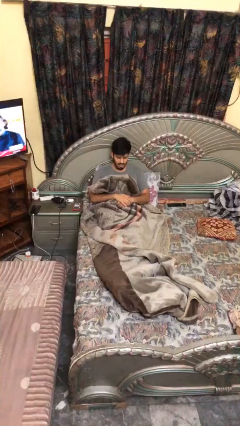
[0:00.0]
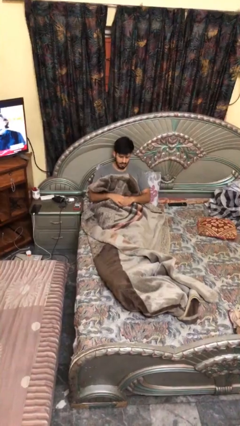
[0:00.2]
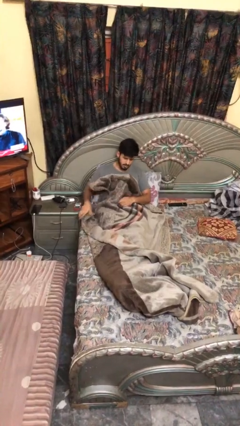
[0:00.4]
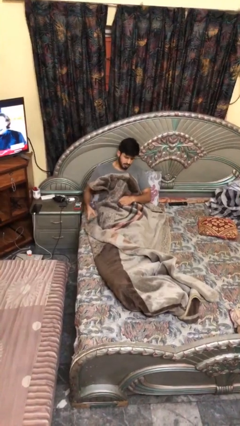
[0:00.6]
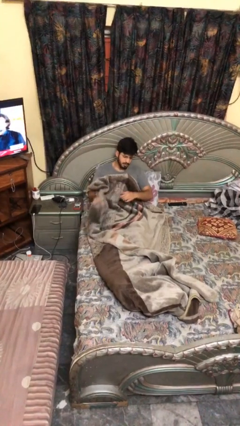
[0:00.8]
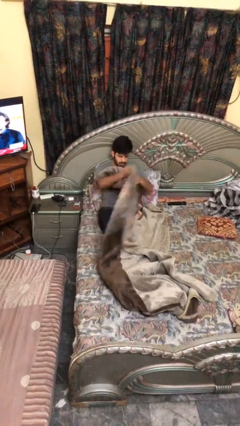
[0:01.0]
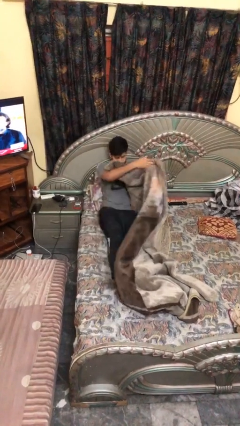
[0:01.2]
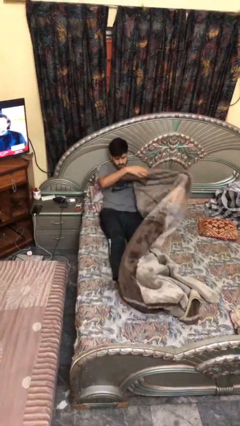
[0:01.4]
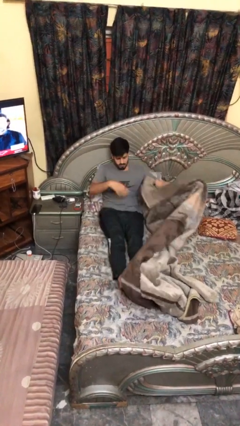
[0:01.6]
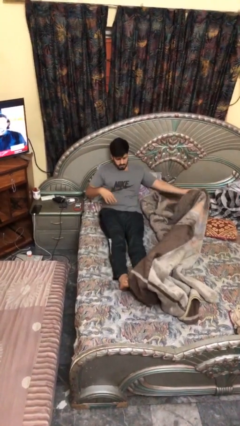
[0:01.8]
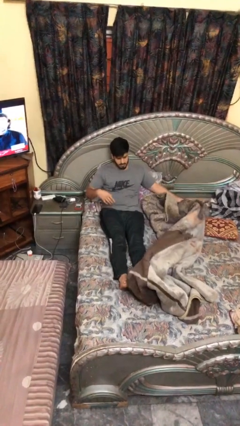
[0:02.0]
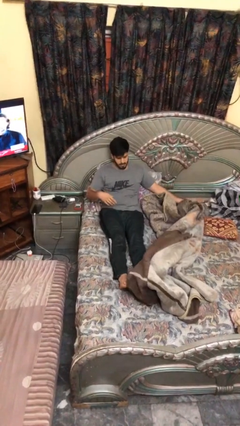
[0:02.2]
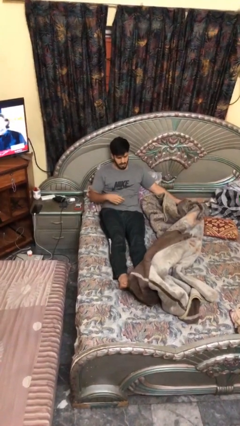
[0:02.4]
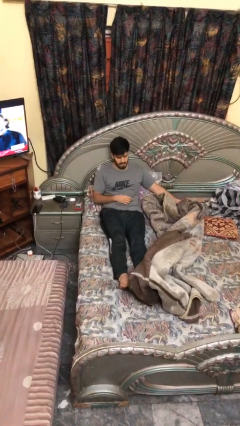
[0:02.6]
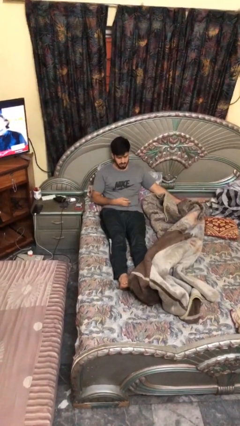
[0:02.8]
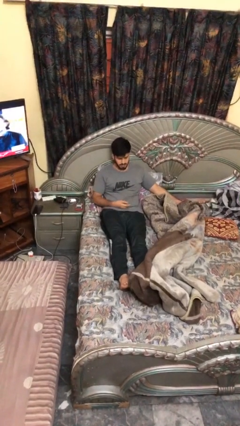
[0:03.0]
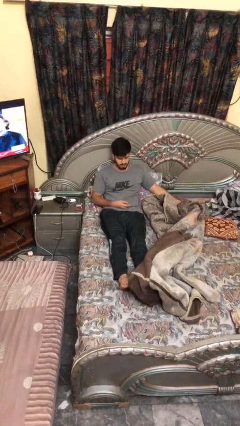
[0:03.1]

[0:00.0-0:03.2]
person uncovers with blanket

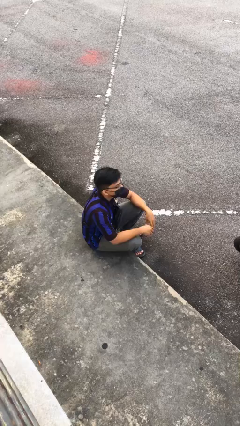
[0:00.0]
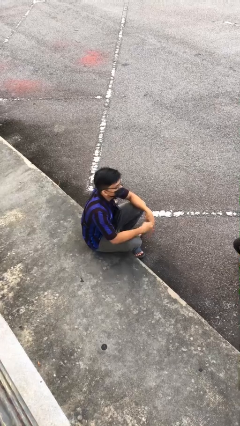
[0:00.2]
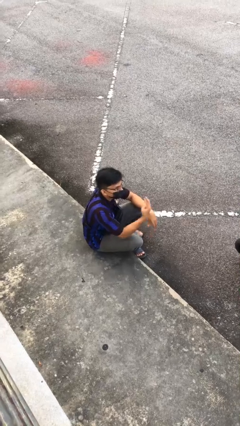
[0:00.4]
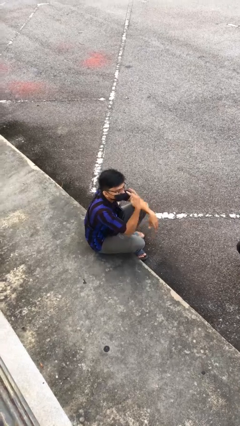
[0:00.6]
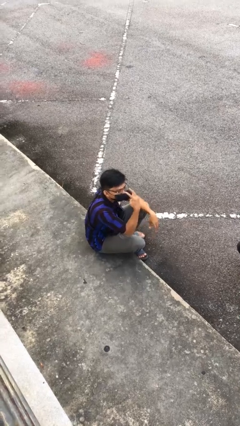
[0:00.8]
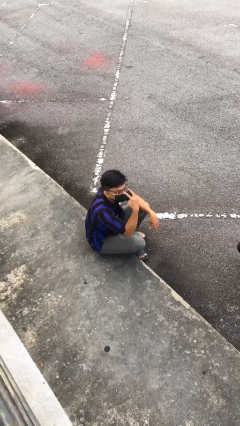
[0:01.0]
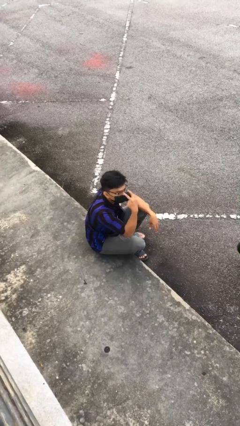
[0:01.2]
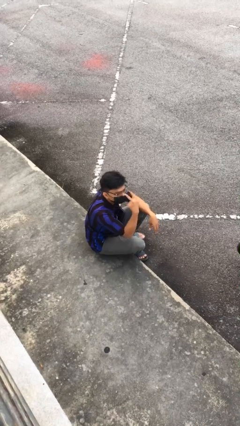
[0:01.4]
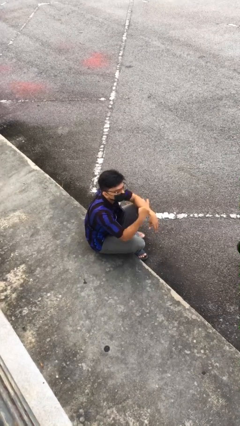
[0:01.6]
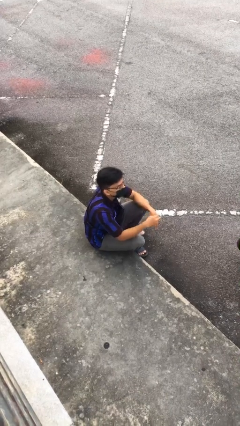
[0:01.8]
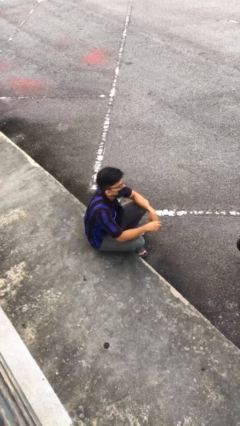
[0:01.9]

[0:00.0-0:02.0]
person gestures watch closely

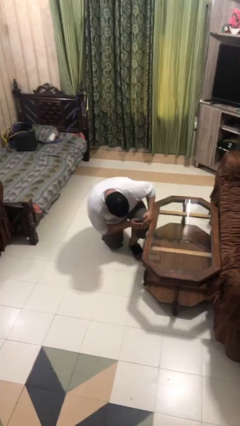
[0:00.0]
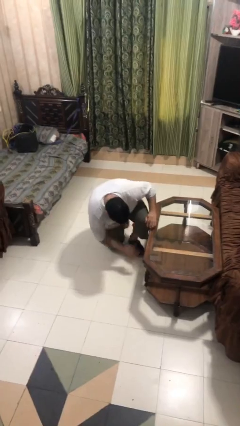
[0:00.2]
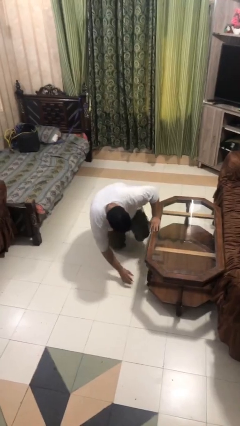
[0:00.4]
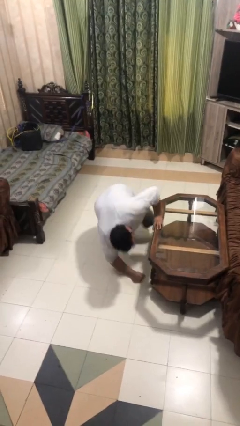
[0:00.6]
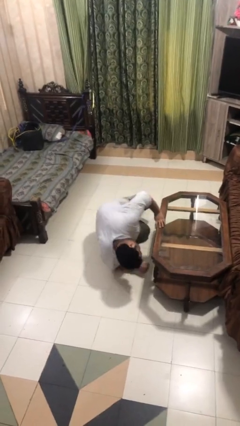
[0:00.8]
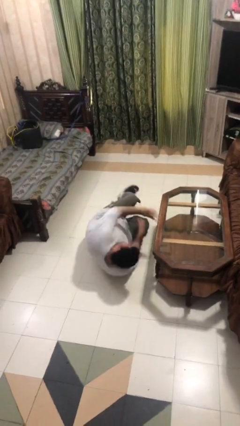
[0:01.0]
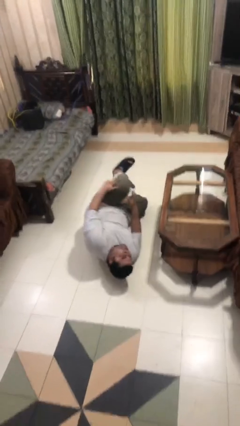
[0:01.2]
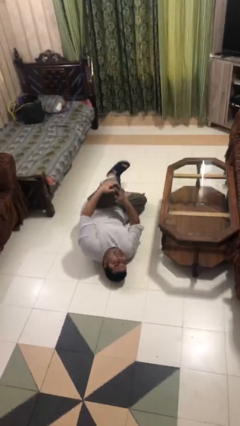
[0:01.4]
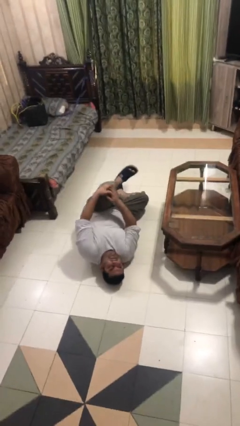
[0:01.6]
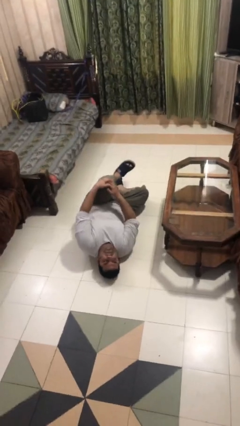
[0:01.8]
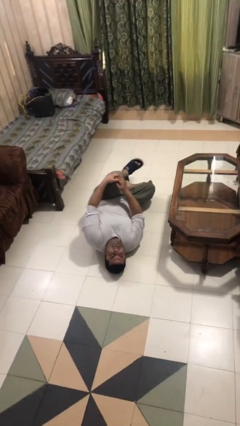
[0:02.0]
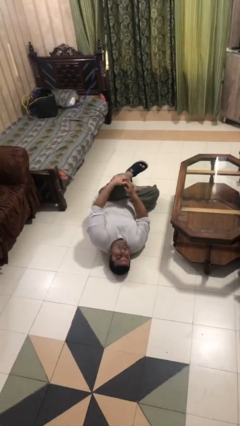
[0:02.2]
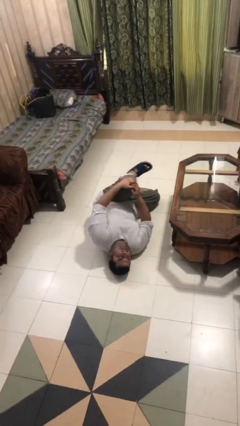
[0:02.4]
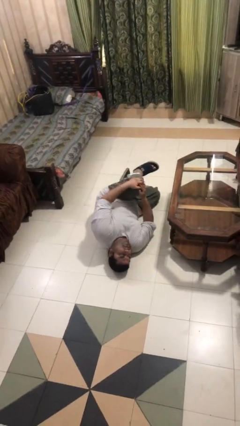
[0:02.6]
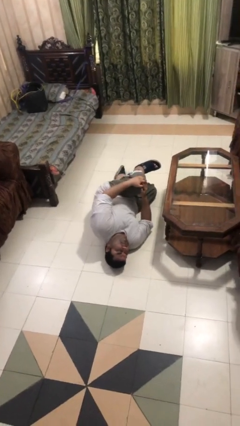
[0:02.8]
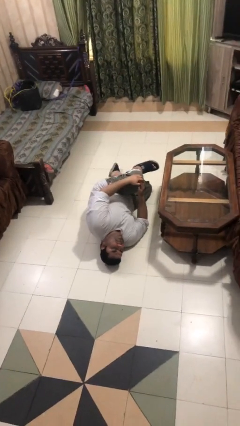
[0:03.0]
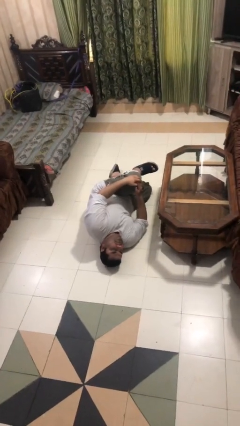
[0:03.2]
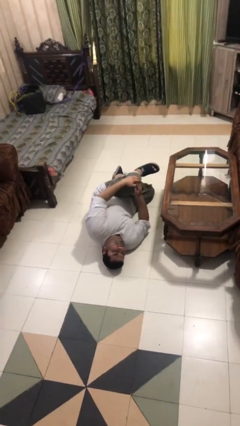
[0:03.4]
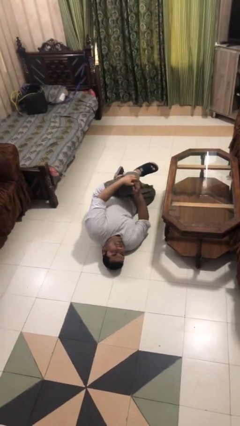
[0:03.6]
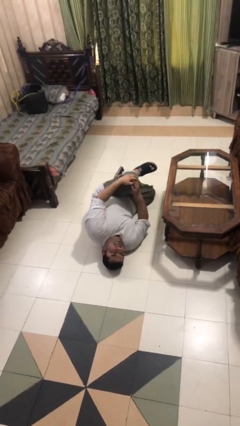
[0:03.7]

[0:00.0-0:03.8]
person lies down on floor

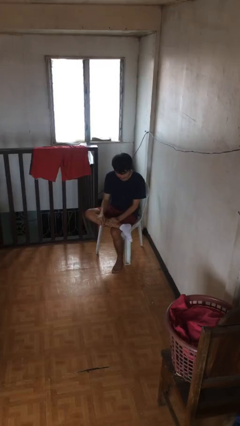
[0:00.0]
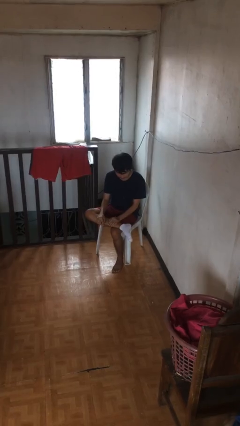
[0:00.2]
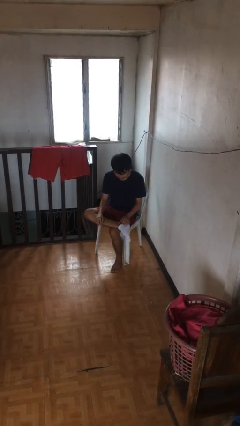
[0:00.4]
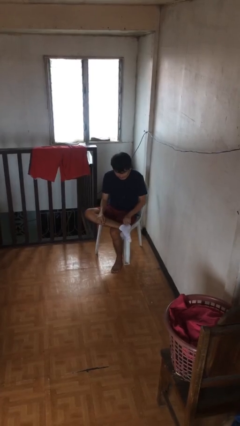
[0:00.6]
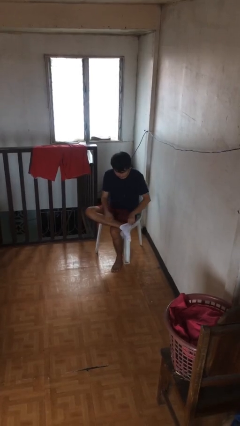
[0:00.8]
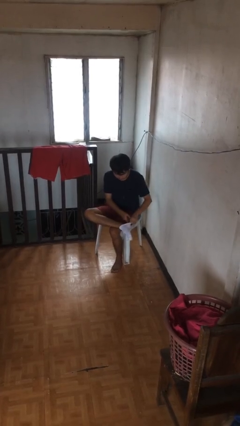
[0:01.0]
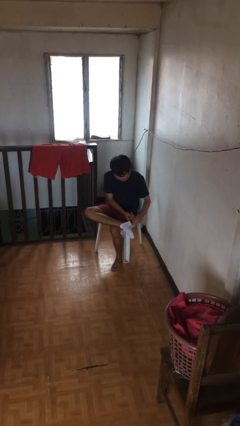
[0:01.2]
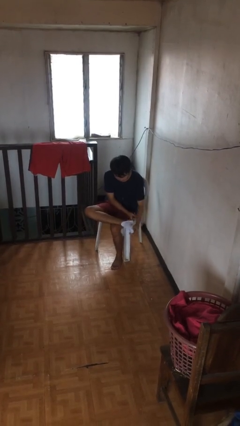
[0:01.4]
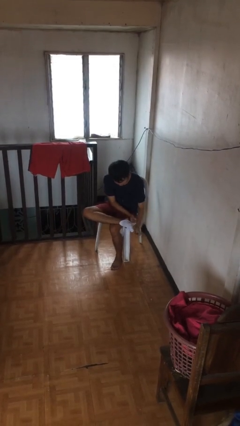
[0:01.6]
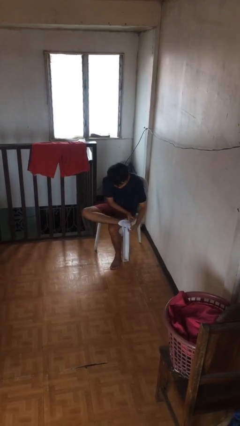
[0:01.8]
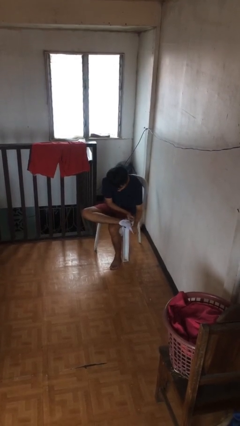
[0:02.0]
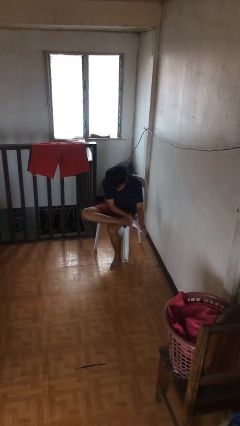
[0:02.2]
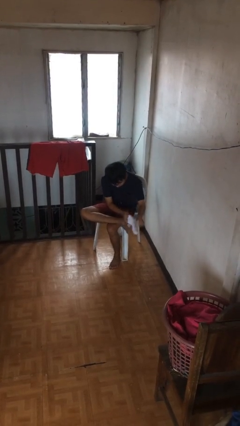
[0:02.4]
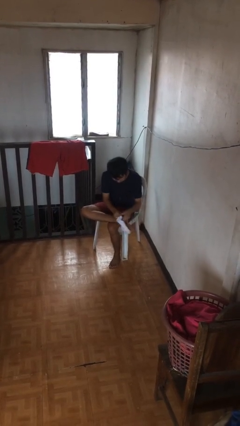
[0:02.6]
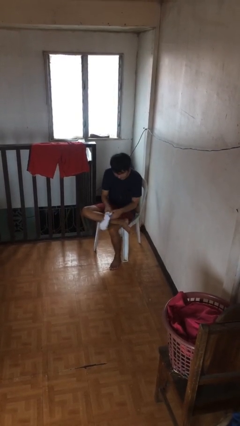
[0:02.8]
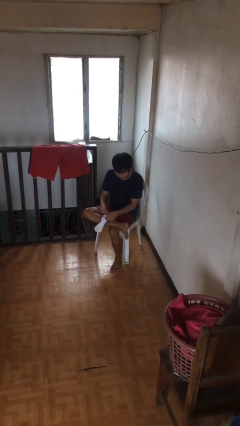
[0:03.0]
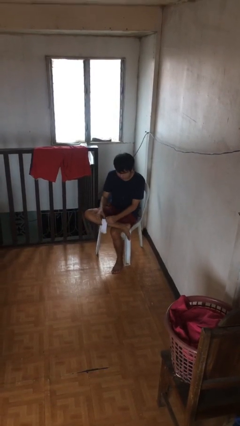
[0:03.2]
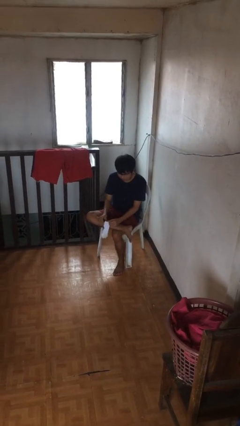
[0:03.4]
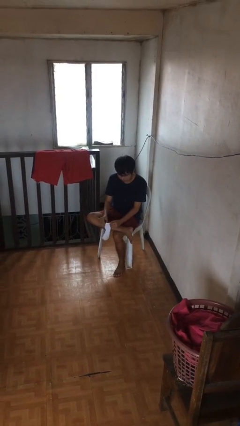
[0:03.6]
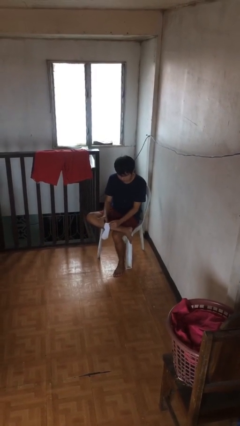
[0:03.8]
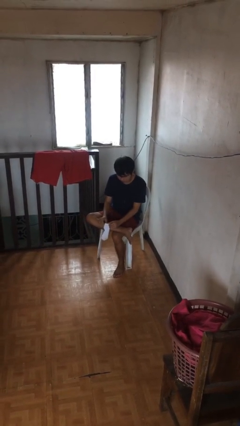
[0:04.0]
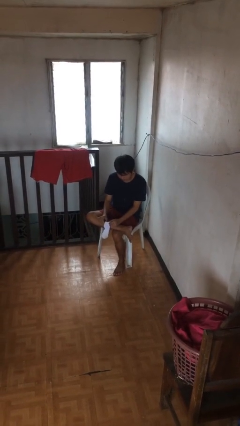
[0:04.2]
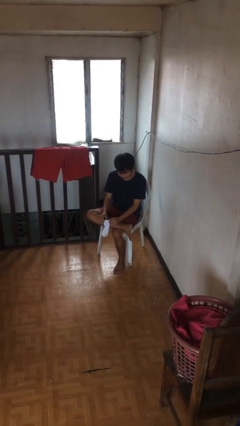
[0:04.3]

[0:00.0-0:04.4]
person takes off socks

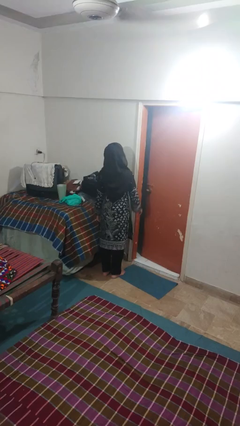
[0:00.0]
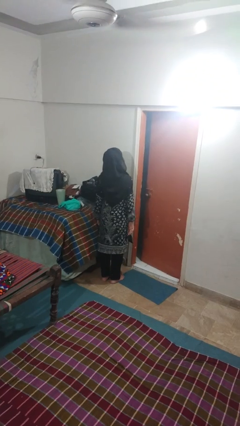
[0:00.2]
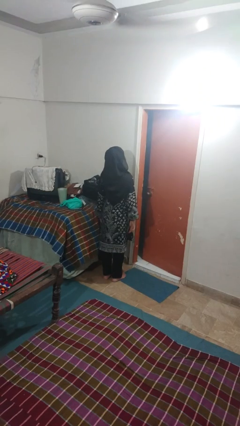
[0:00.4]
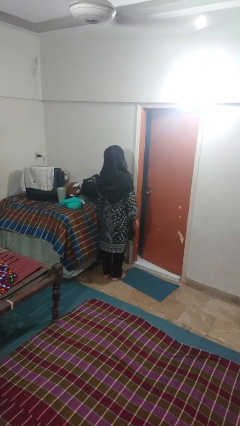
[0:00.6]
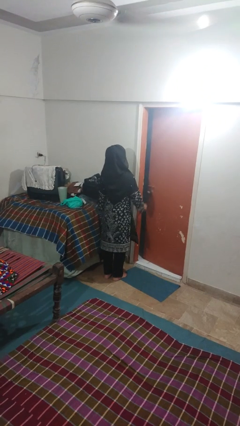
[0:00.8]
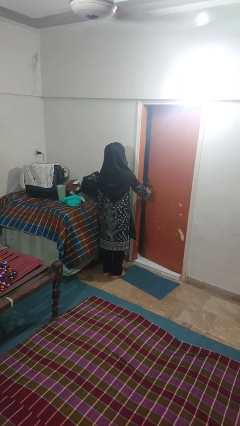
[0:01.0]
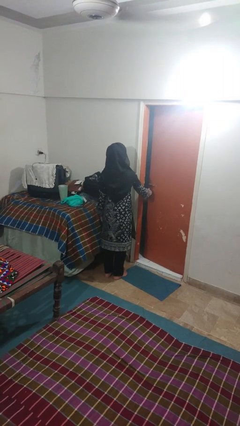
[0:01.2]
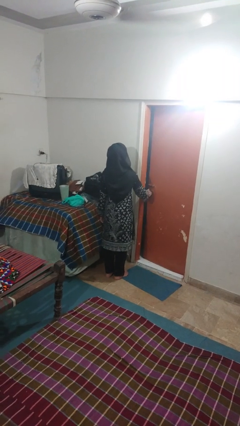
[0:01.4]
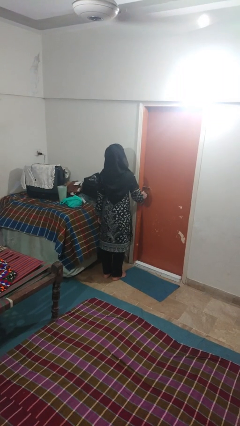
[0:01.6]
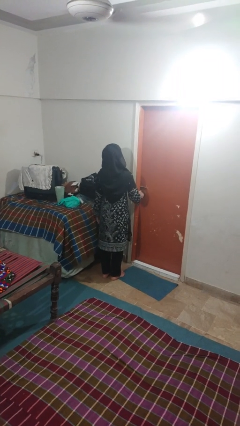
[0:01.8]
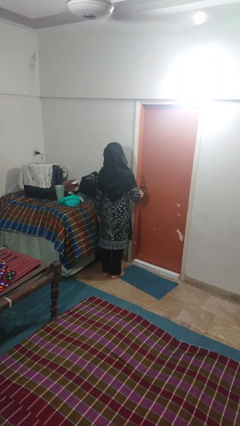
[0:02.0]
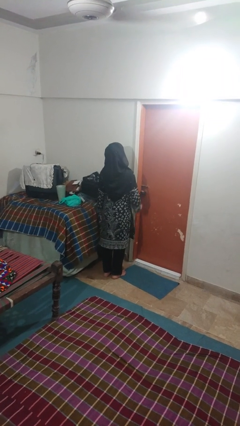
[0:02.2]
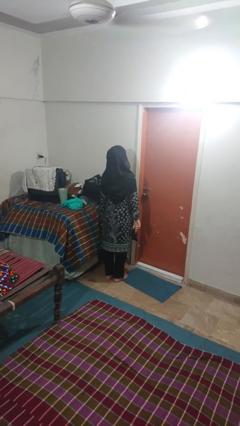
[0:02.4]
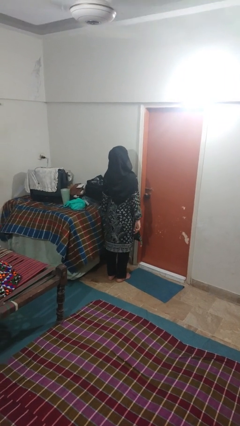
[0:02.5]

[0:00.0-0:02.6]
person closes facility door

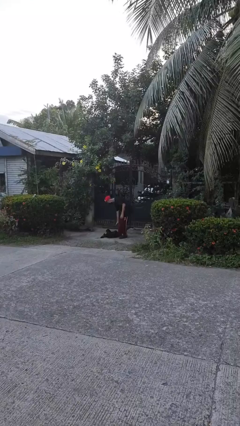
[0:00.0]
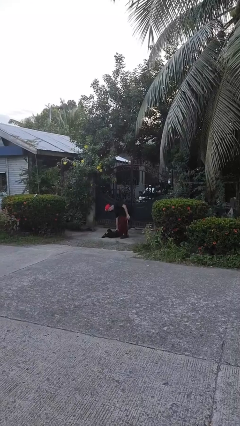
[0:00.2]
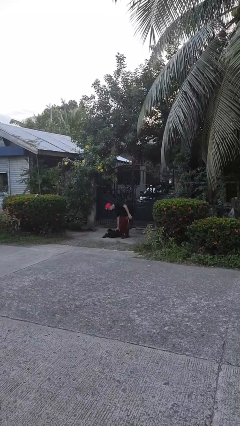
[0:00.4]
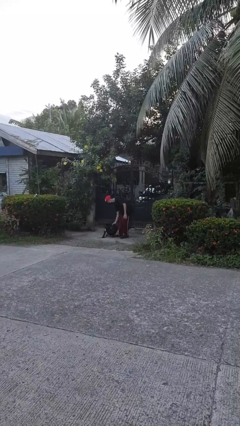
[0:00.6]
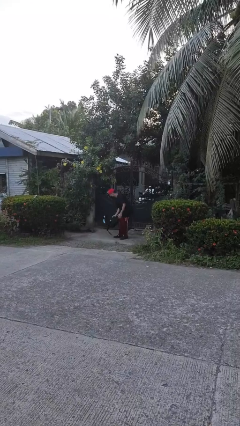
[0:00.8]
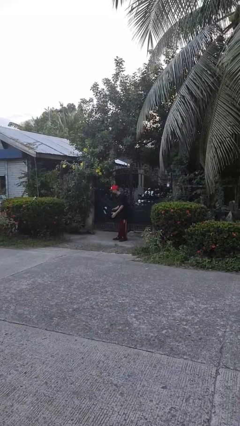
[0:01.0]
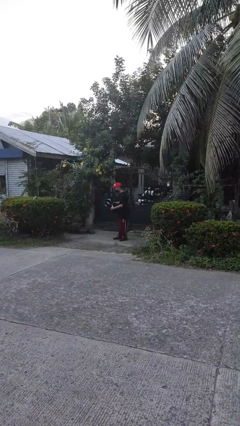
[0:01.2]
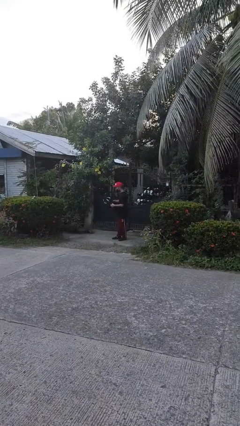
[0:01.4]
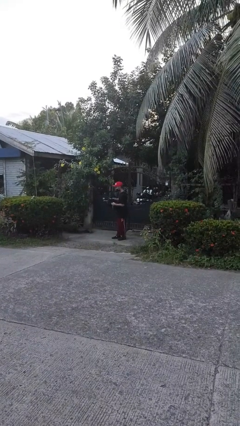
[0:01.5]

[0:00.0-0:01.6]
person picks up object from floor
